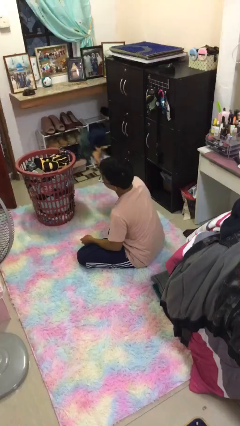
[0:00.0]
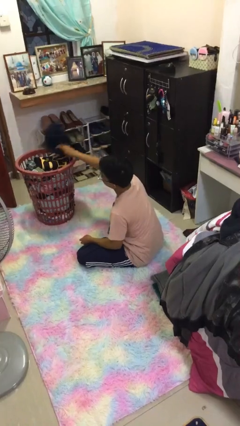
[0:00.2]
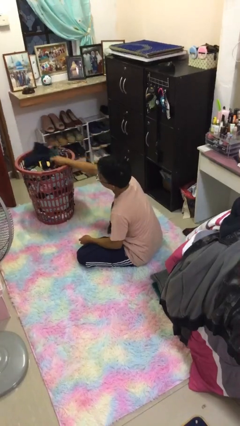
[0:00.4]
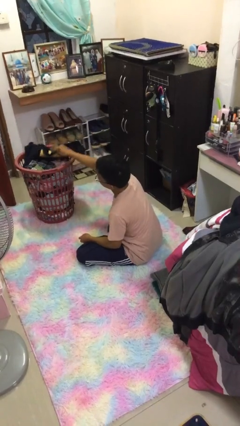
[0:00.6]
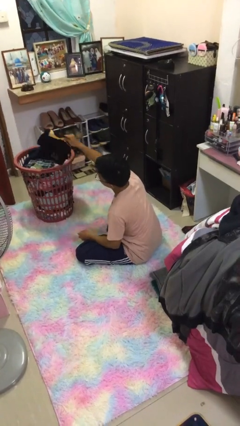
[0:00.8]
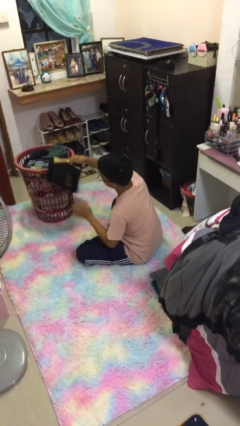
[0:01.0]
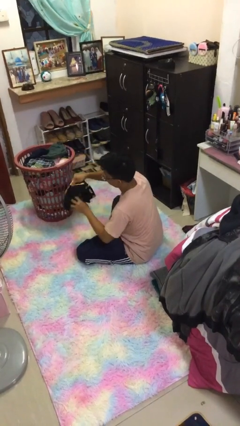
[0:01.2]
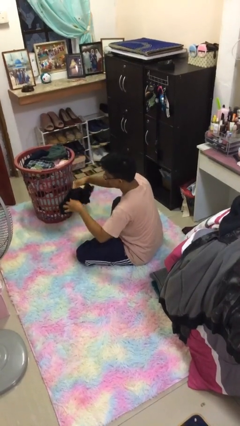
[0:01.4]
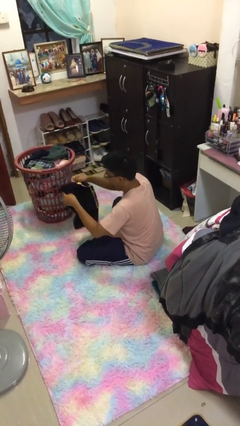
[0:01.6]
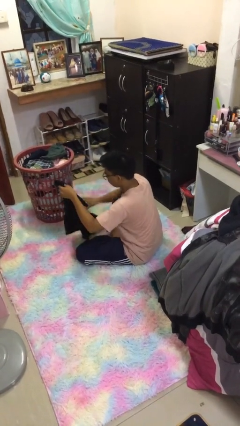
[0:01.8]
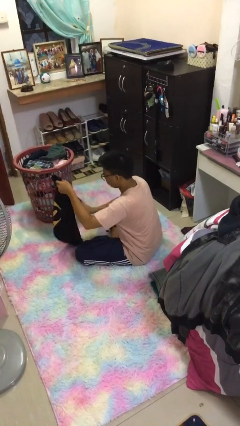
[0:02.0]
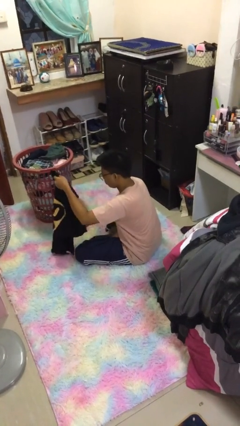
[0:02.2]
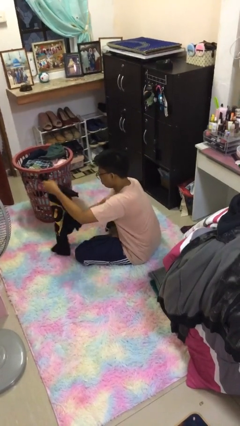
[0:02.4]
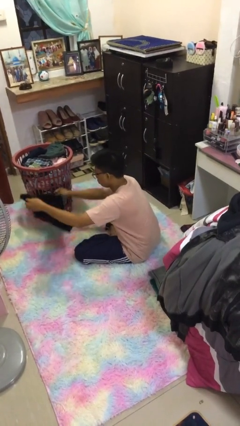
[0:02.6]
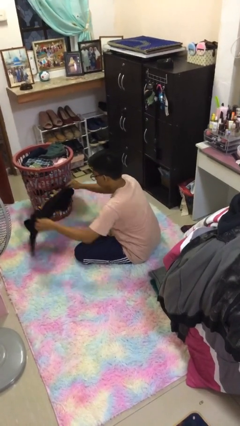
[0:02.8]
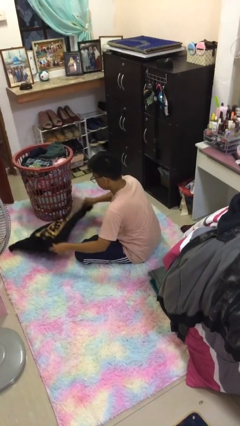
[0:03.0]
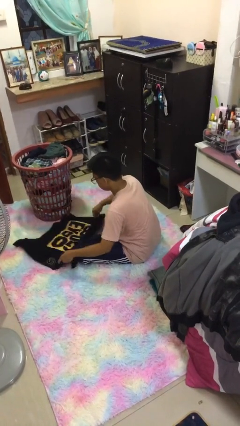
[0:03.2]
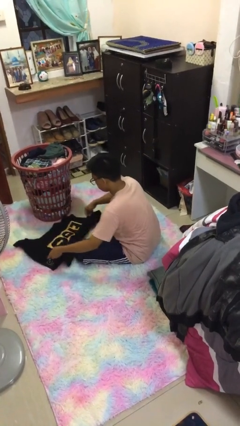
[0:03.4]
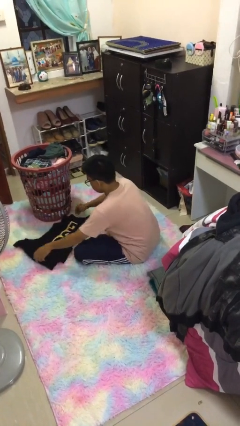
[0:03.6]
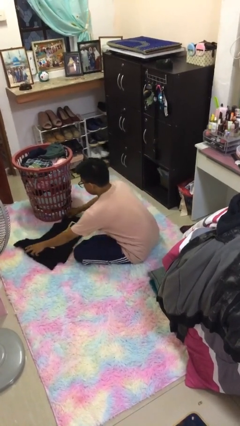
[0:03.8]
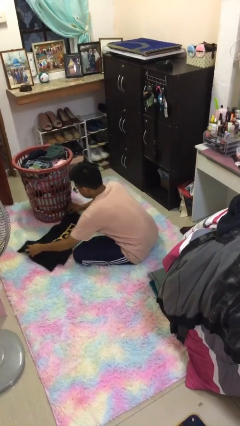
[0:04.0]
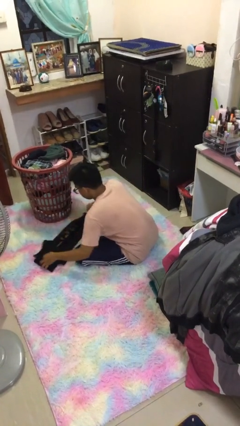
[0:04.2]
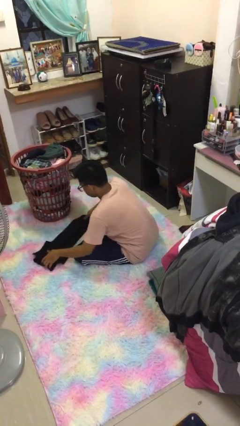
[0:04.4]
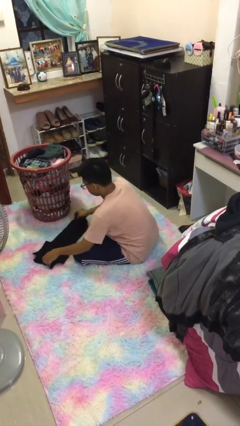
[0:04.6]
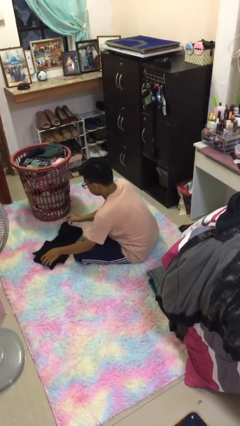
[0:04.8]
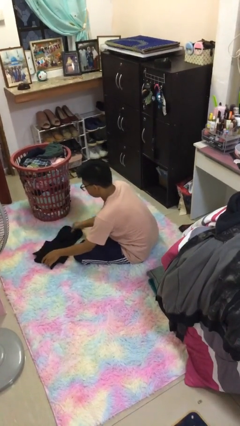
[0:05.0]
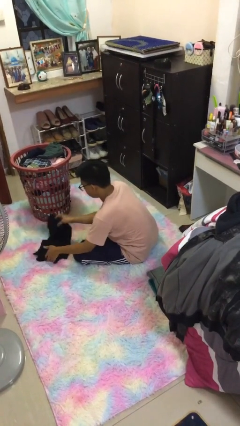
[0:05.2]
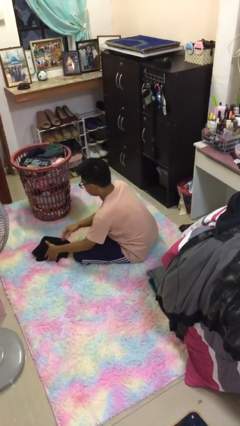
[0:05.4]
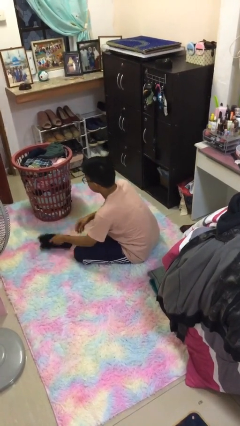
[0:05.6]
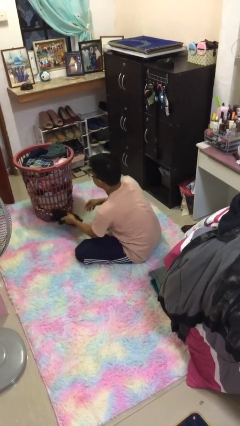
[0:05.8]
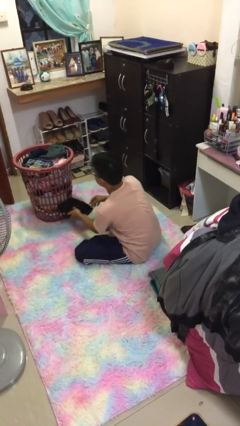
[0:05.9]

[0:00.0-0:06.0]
person folds shirt

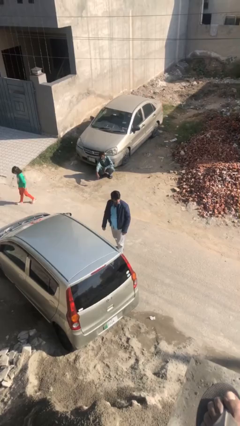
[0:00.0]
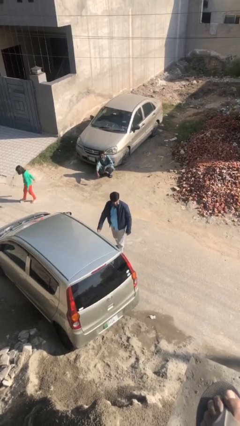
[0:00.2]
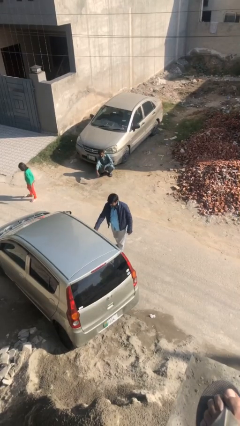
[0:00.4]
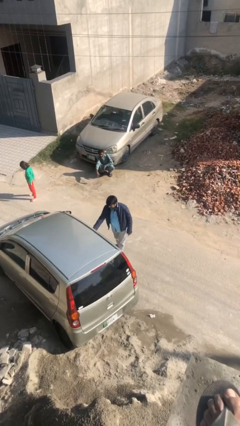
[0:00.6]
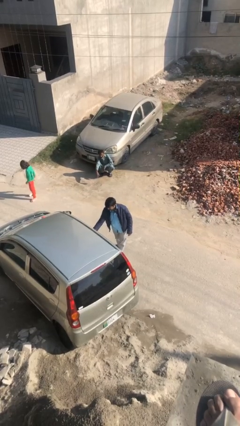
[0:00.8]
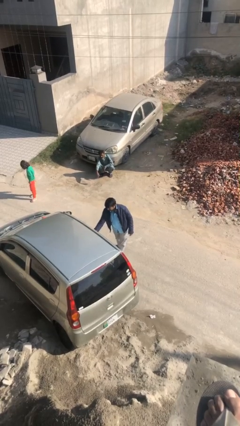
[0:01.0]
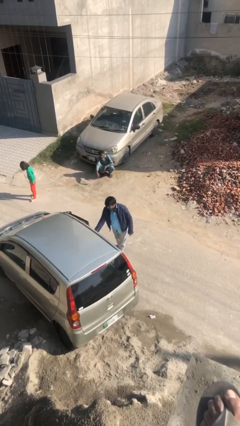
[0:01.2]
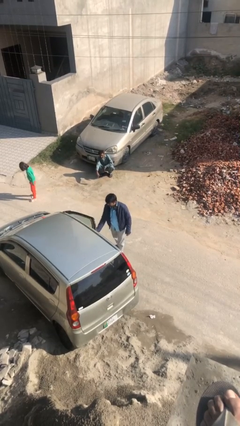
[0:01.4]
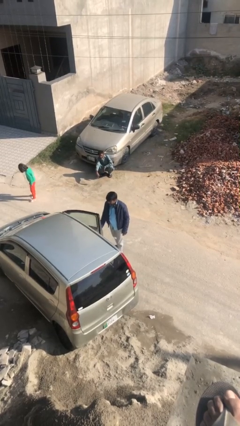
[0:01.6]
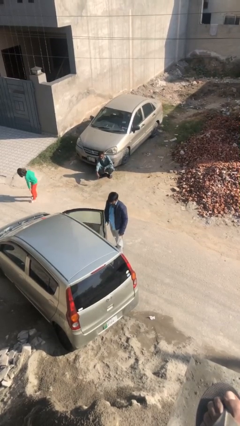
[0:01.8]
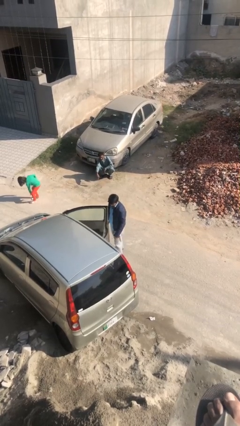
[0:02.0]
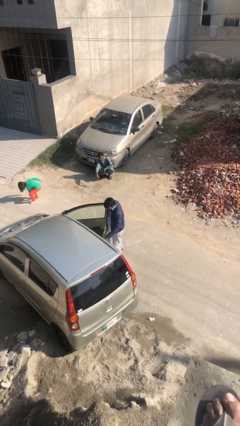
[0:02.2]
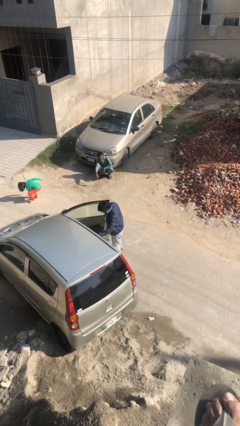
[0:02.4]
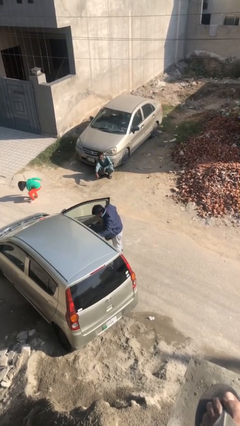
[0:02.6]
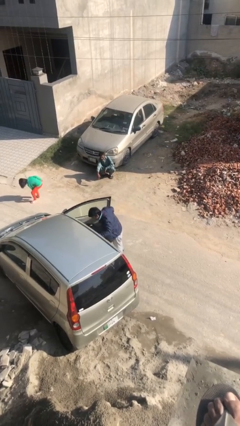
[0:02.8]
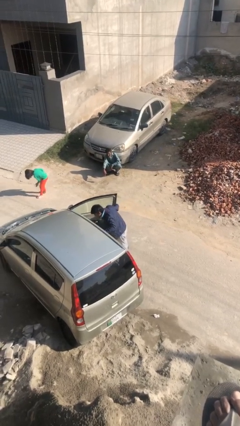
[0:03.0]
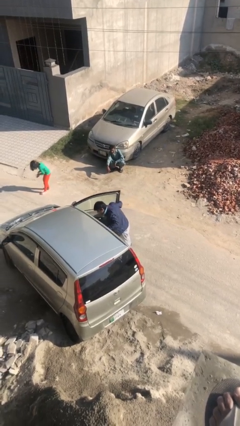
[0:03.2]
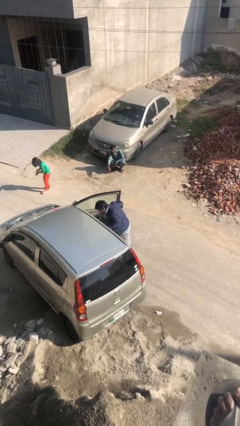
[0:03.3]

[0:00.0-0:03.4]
person opens car door

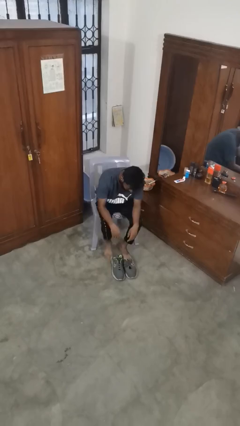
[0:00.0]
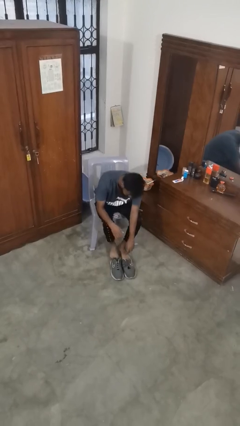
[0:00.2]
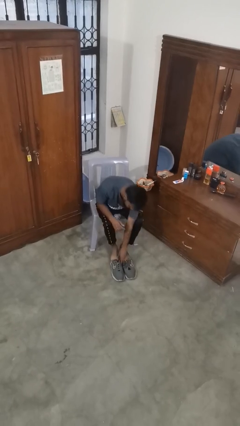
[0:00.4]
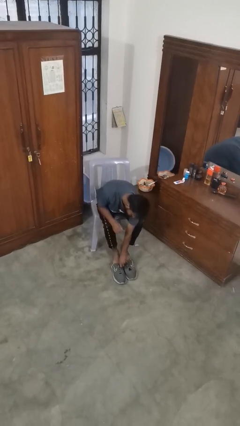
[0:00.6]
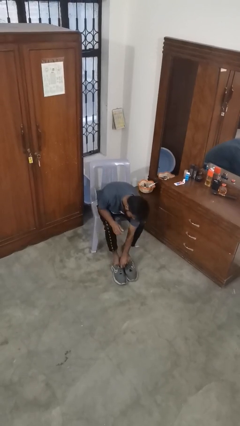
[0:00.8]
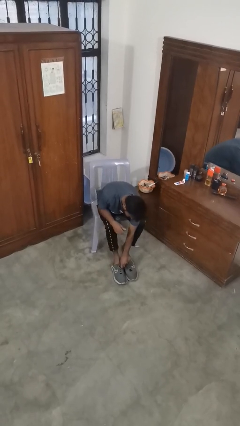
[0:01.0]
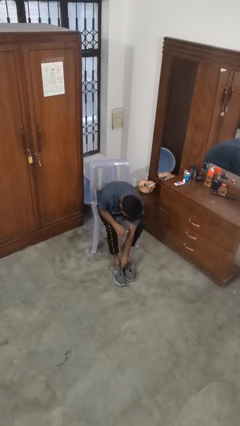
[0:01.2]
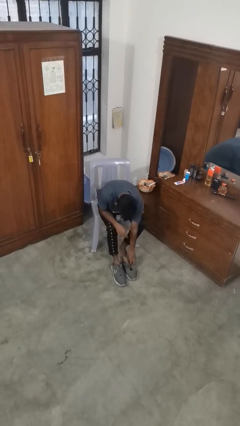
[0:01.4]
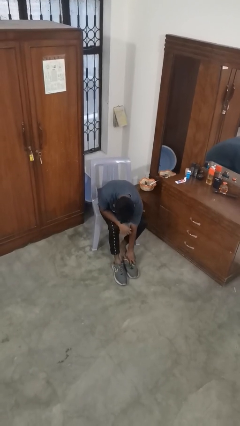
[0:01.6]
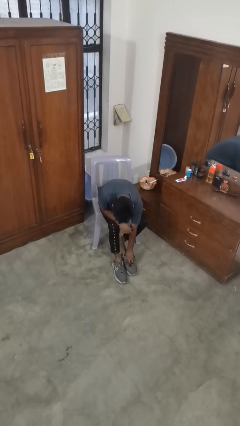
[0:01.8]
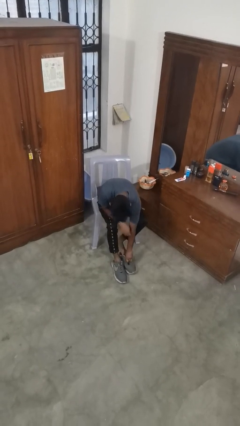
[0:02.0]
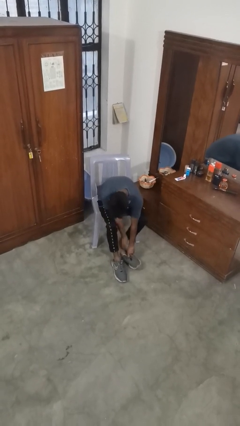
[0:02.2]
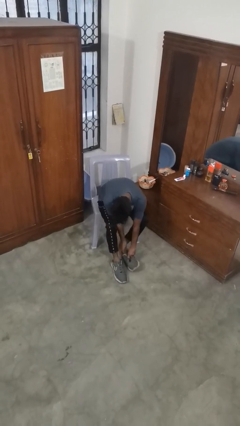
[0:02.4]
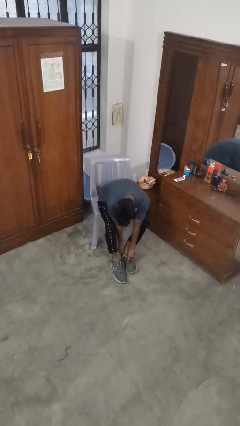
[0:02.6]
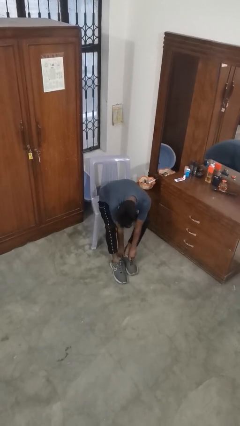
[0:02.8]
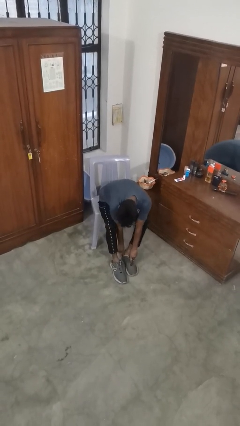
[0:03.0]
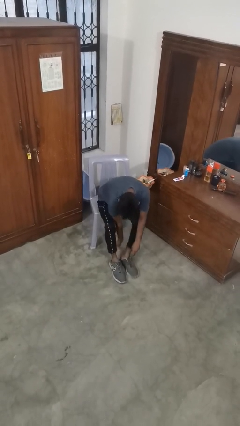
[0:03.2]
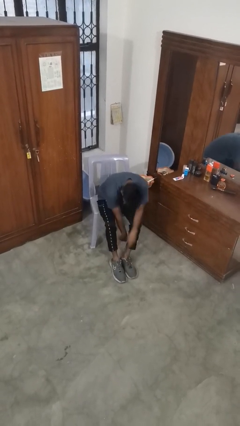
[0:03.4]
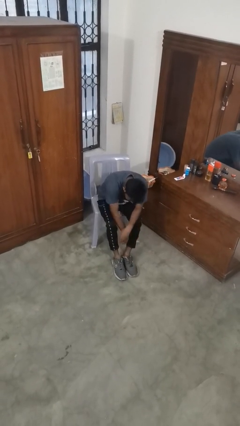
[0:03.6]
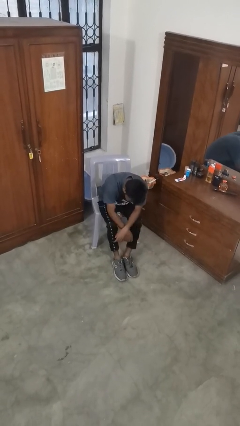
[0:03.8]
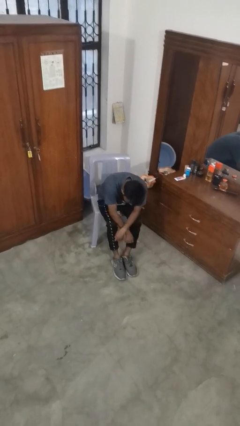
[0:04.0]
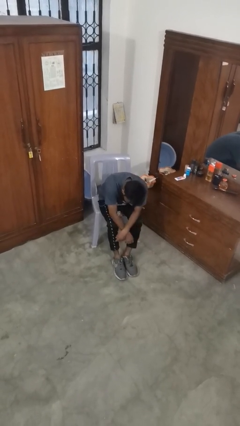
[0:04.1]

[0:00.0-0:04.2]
person puts on shoes

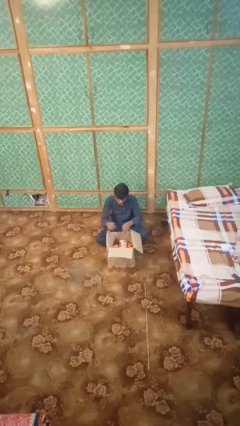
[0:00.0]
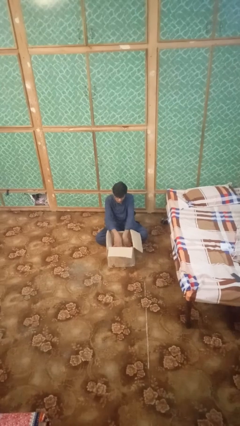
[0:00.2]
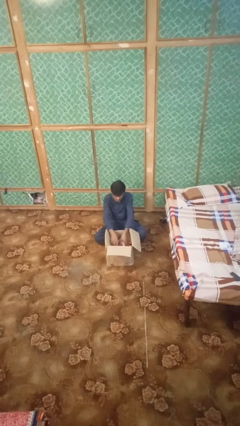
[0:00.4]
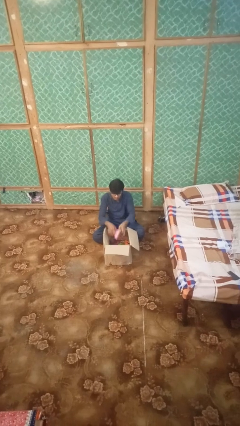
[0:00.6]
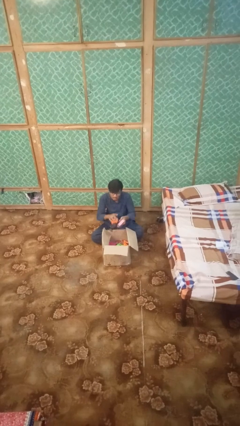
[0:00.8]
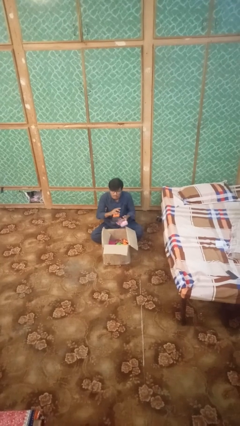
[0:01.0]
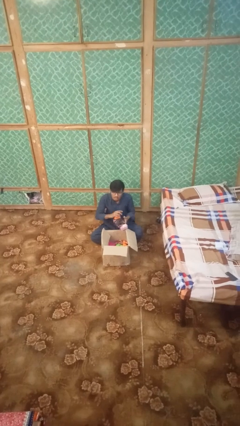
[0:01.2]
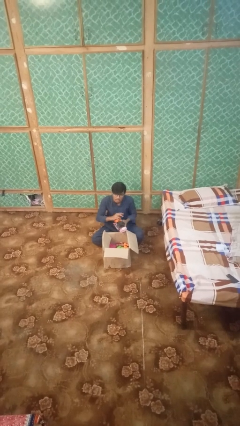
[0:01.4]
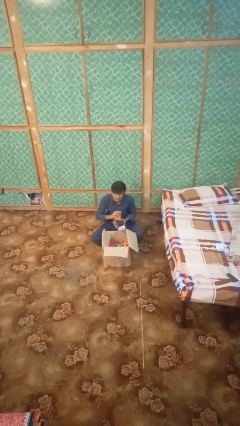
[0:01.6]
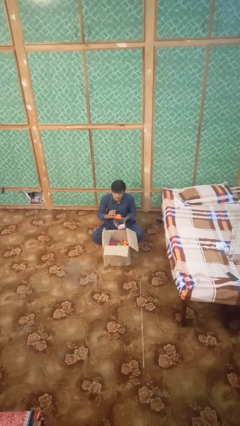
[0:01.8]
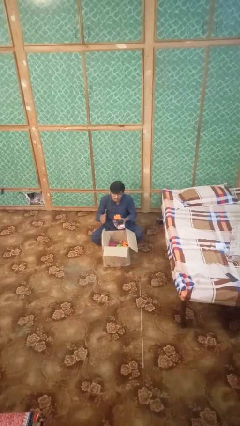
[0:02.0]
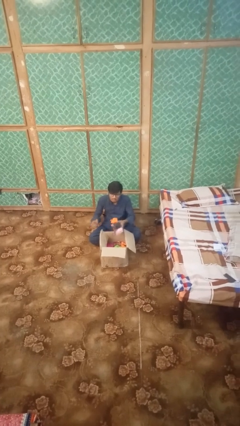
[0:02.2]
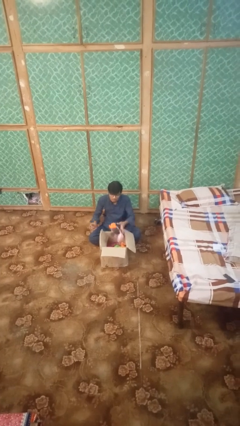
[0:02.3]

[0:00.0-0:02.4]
person takes object from box

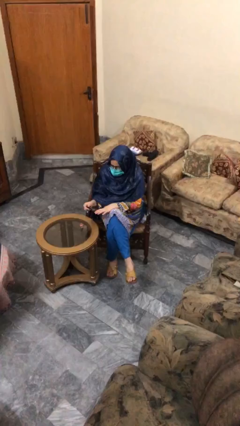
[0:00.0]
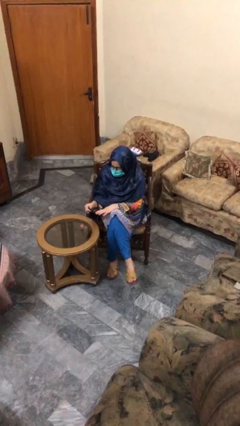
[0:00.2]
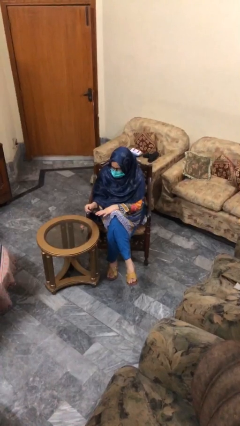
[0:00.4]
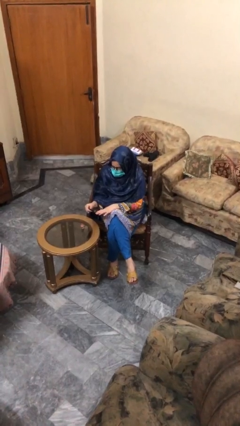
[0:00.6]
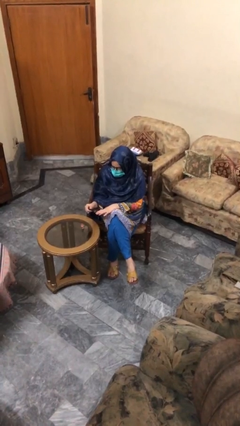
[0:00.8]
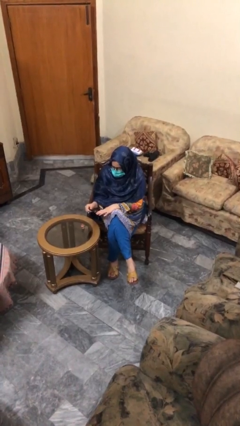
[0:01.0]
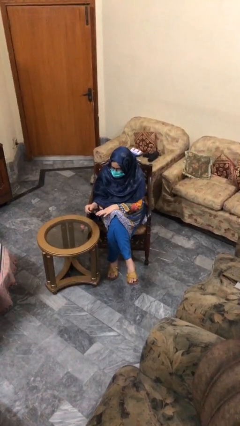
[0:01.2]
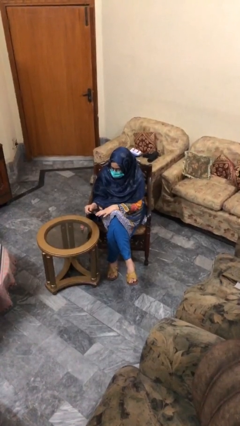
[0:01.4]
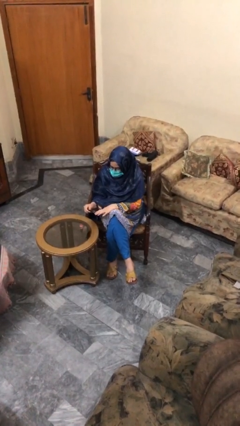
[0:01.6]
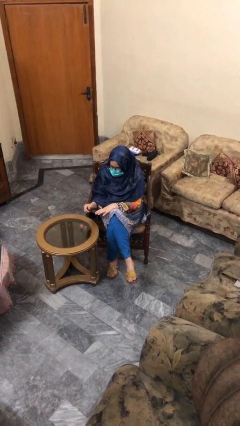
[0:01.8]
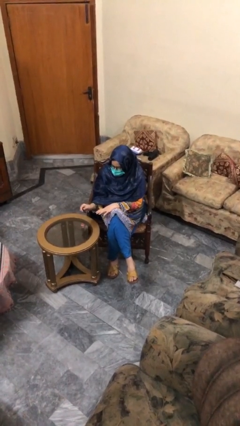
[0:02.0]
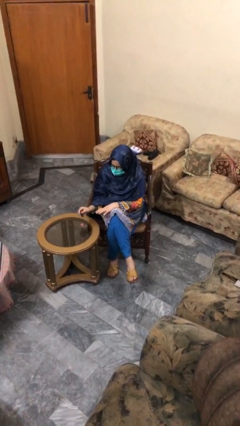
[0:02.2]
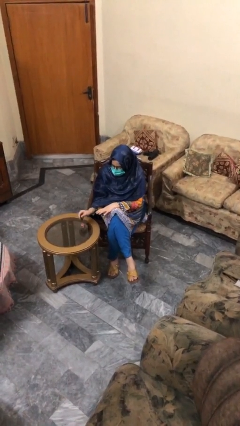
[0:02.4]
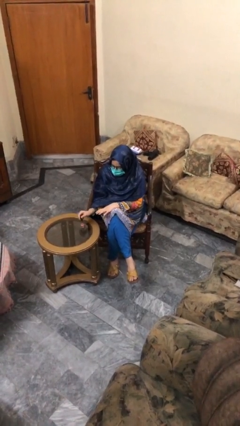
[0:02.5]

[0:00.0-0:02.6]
person paints fingernails
